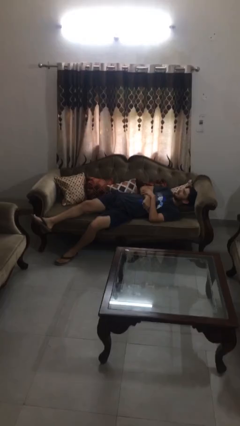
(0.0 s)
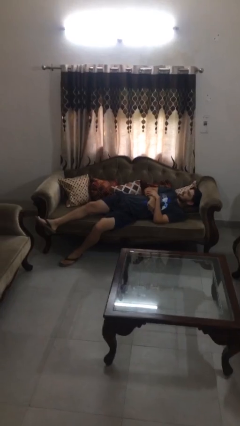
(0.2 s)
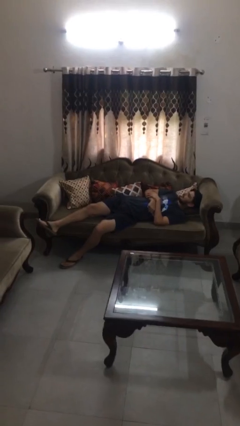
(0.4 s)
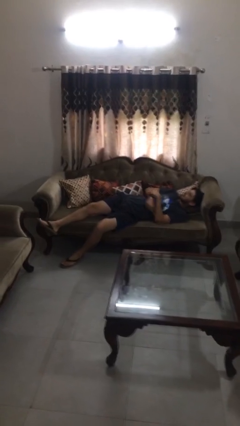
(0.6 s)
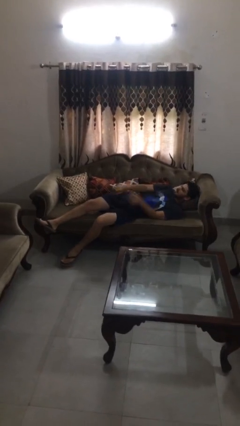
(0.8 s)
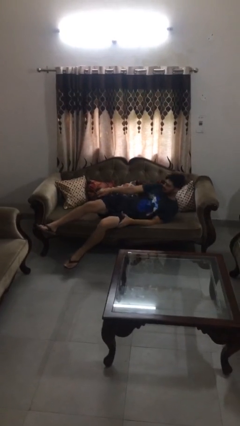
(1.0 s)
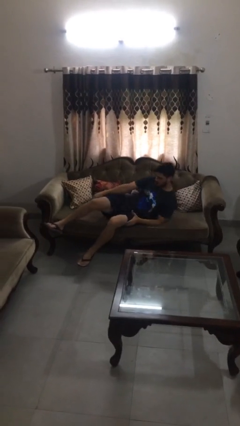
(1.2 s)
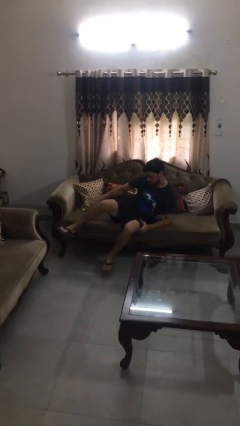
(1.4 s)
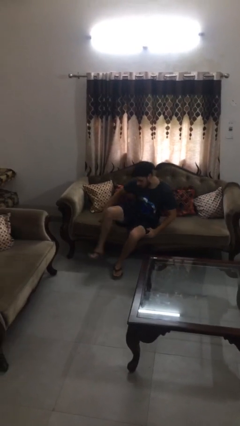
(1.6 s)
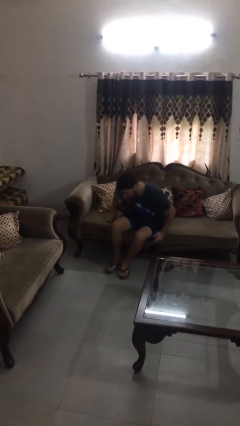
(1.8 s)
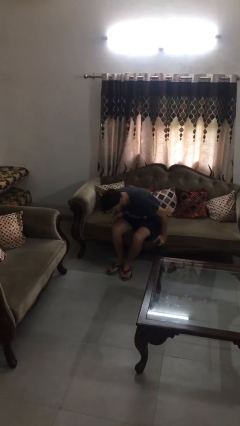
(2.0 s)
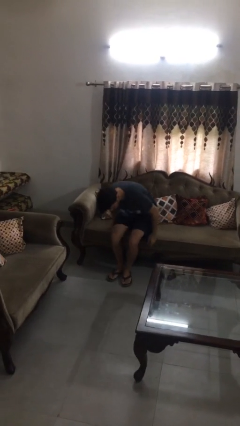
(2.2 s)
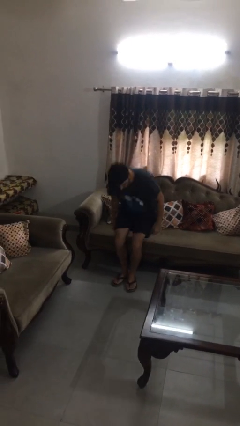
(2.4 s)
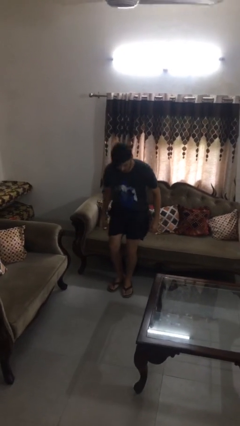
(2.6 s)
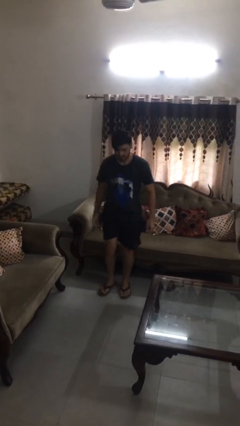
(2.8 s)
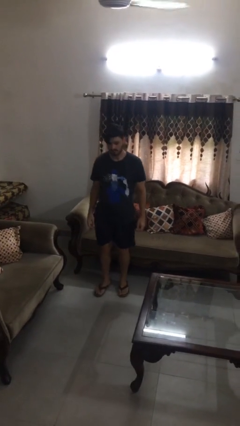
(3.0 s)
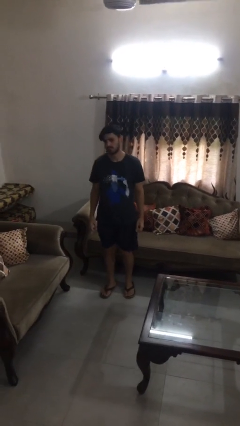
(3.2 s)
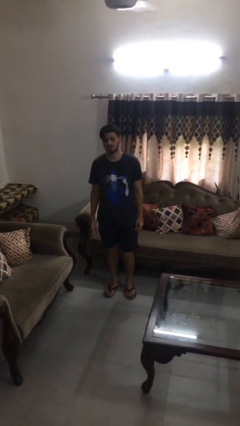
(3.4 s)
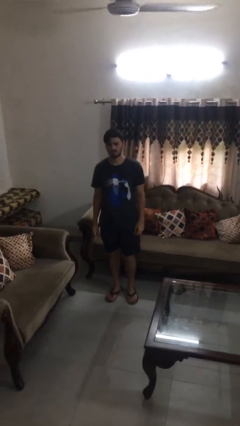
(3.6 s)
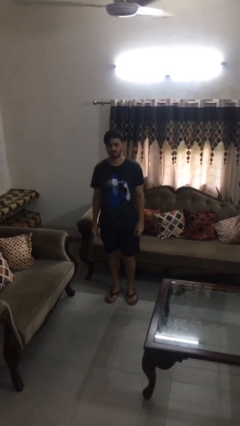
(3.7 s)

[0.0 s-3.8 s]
person stands up

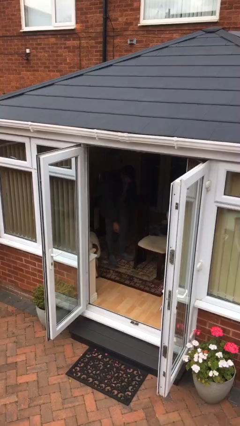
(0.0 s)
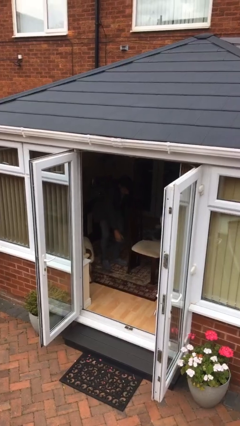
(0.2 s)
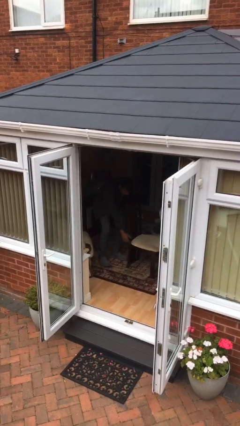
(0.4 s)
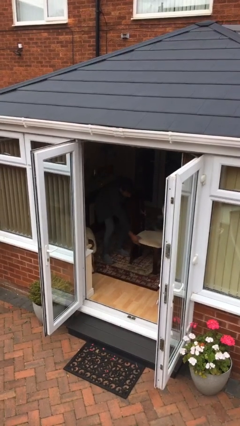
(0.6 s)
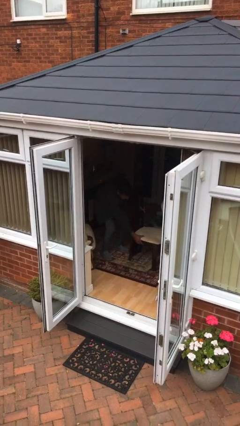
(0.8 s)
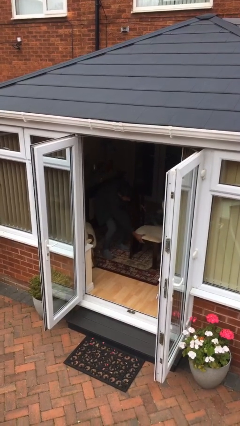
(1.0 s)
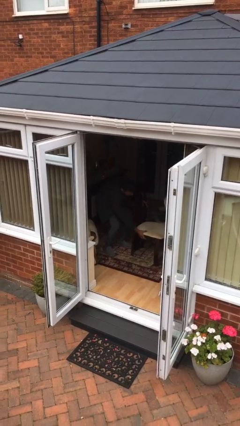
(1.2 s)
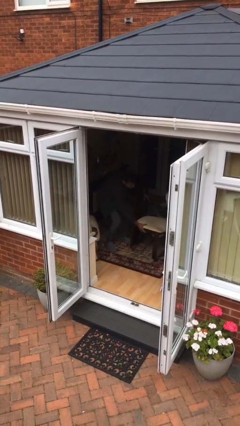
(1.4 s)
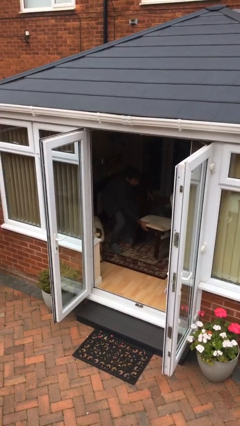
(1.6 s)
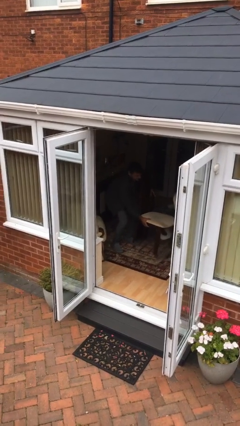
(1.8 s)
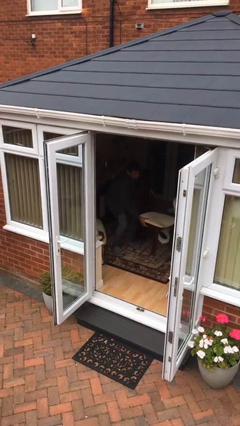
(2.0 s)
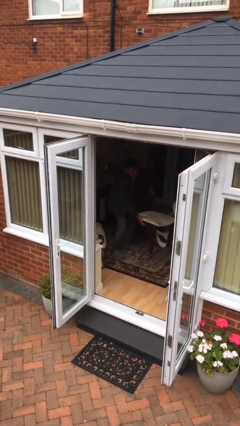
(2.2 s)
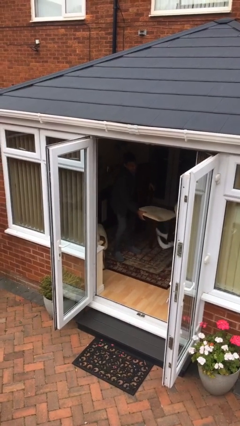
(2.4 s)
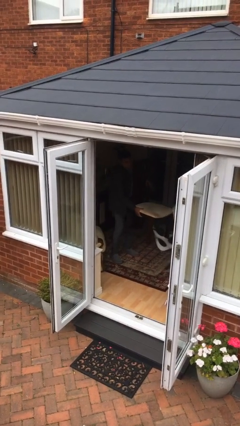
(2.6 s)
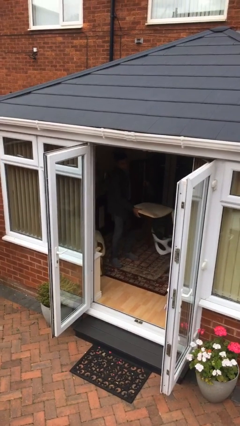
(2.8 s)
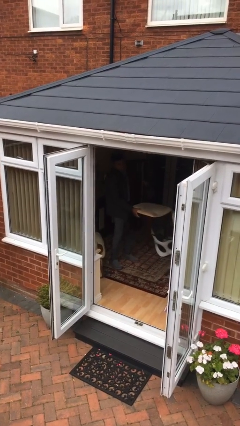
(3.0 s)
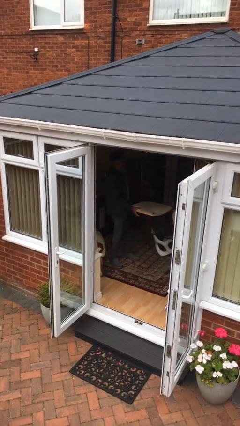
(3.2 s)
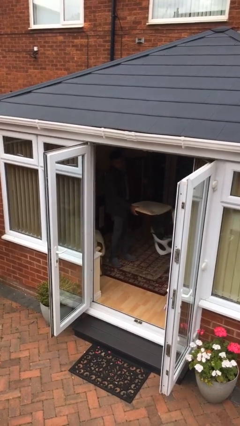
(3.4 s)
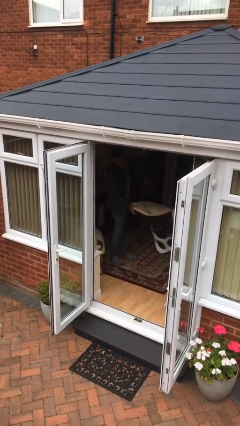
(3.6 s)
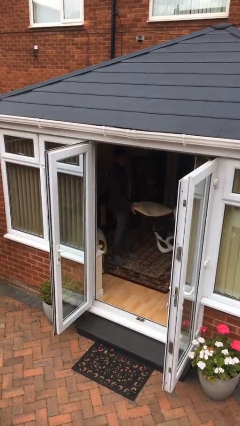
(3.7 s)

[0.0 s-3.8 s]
person picks up object from floor

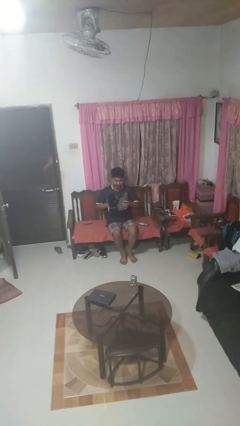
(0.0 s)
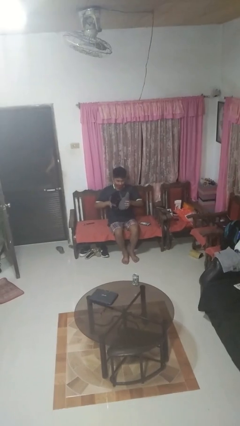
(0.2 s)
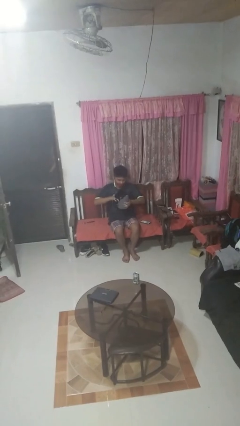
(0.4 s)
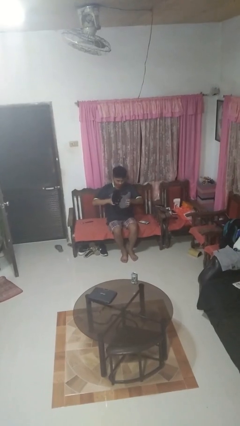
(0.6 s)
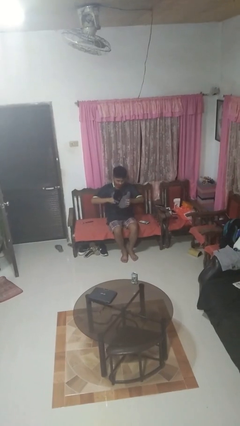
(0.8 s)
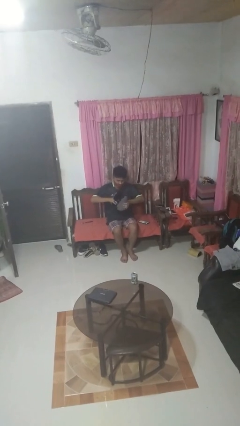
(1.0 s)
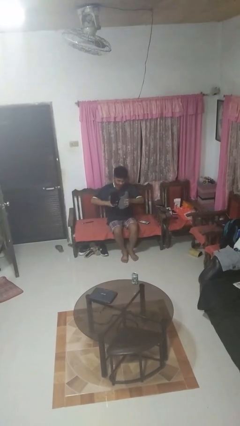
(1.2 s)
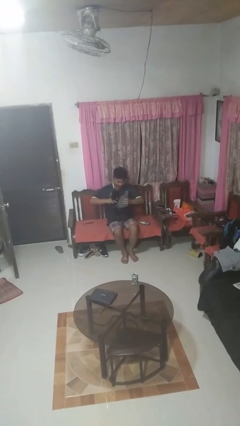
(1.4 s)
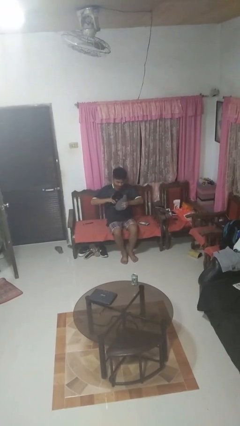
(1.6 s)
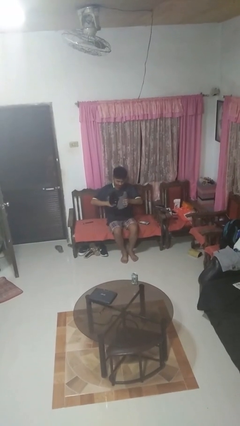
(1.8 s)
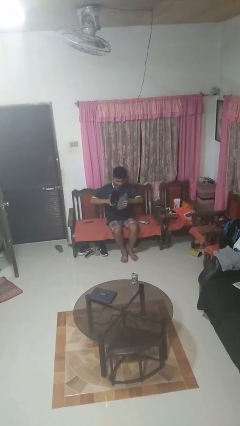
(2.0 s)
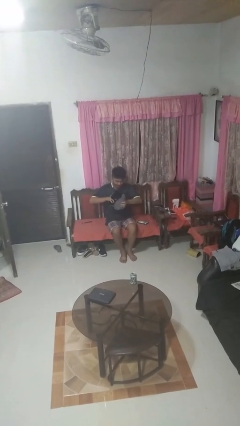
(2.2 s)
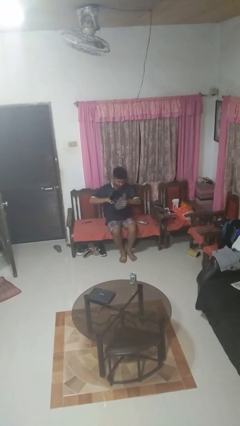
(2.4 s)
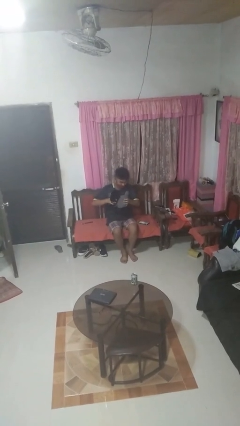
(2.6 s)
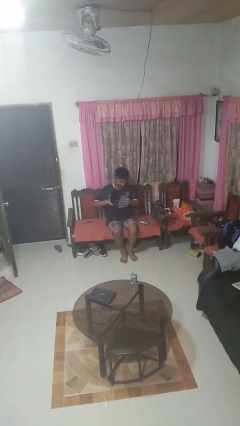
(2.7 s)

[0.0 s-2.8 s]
person squeezes object

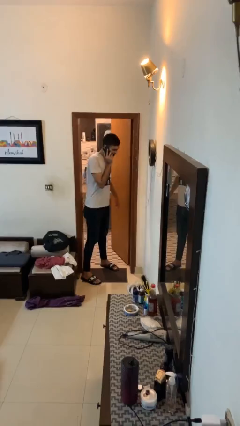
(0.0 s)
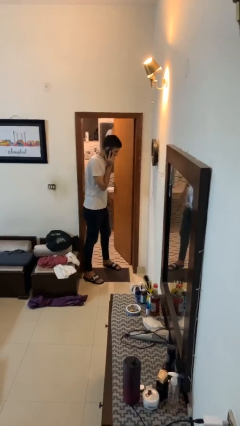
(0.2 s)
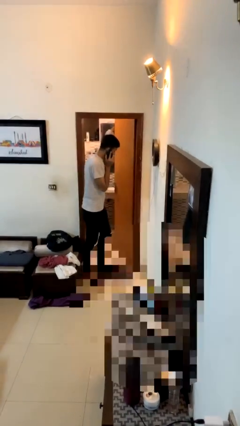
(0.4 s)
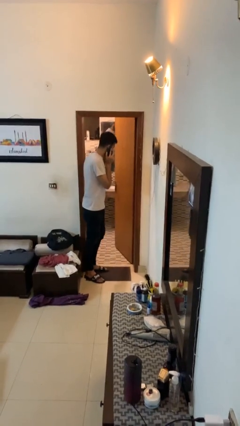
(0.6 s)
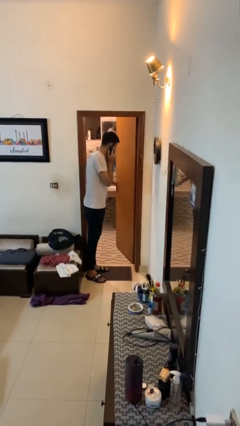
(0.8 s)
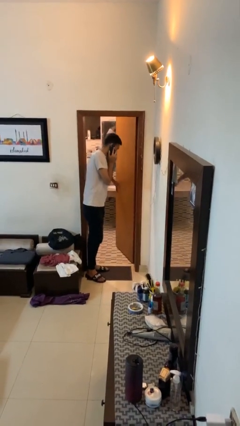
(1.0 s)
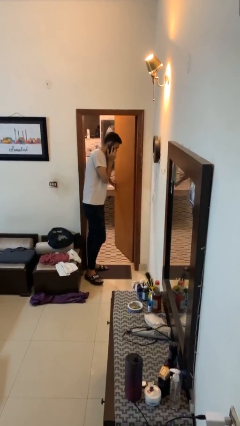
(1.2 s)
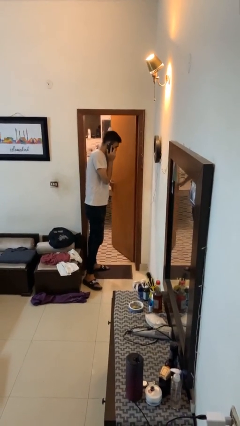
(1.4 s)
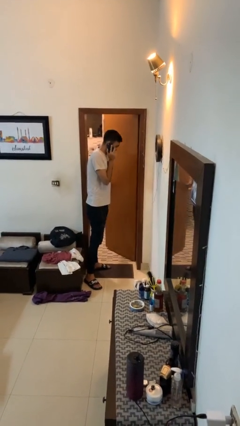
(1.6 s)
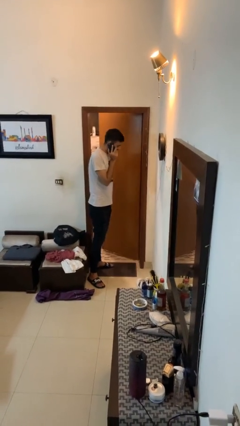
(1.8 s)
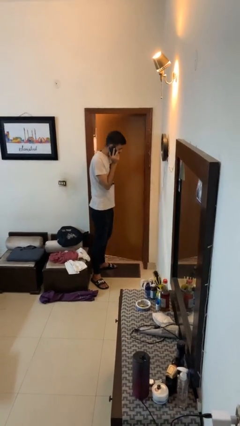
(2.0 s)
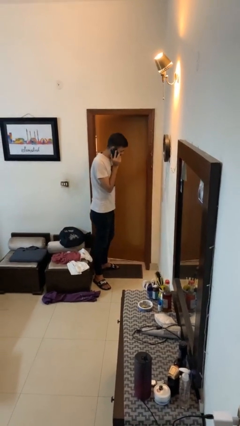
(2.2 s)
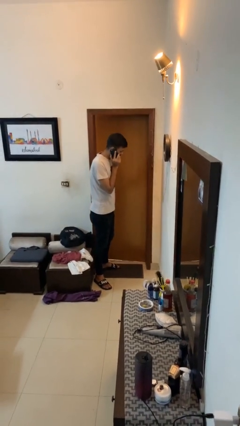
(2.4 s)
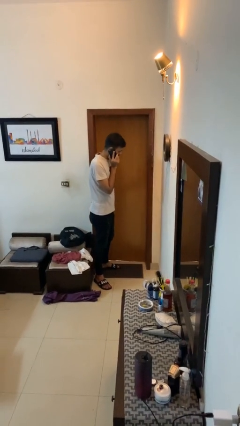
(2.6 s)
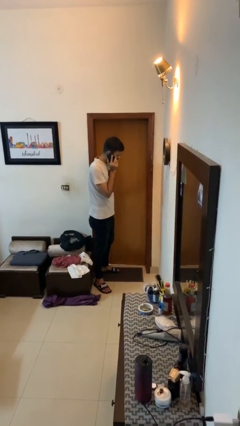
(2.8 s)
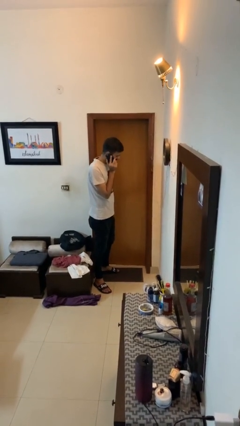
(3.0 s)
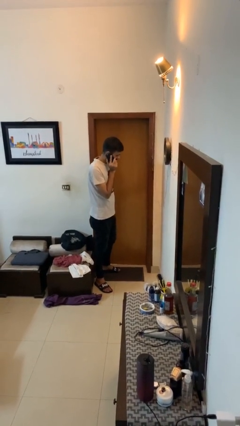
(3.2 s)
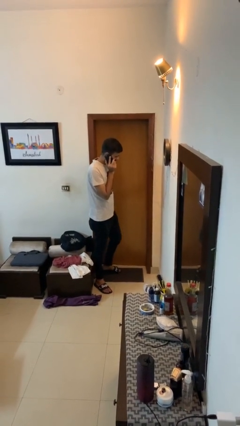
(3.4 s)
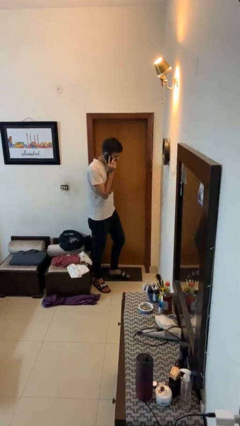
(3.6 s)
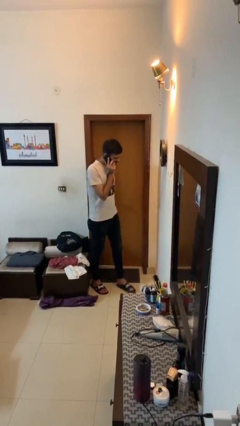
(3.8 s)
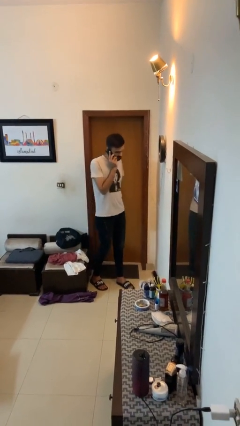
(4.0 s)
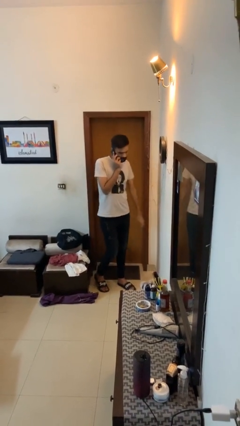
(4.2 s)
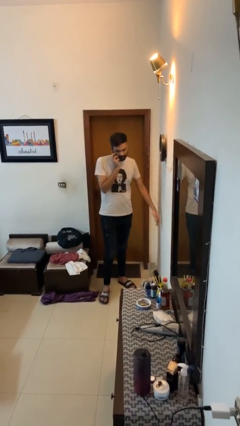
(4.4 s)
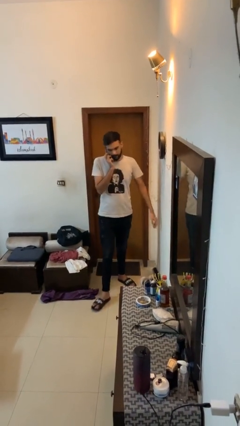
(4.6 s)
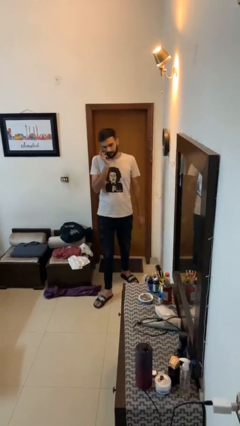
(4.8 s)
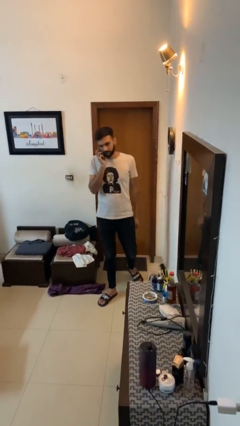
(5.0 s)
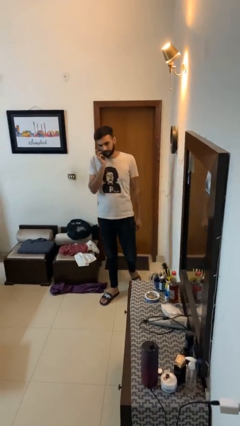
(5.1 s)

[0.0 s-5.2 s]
person closes facility door

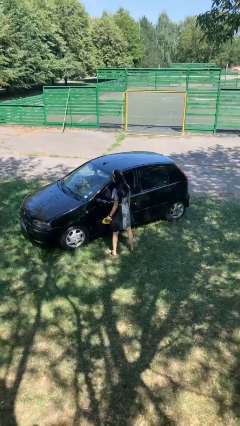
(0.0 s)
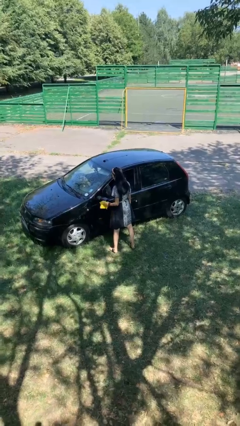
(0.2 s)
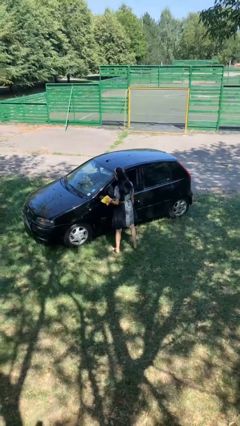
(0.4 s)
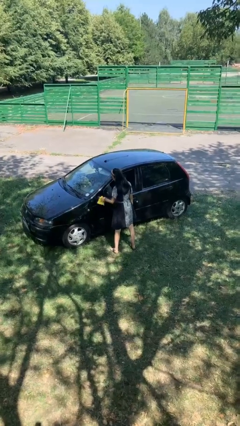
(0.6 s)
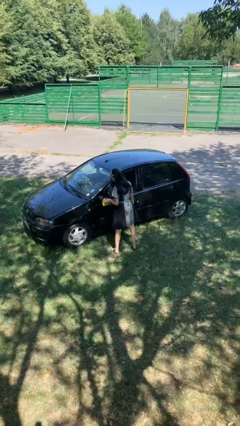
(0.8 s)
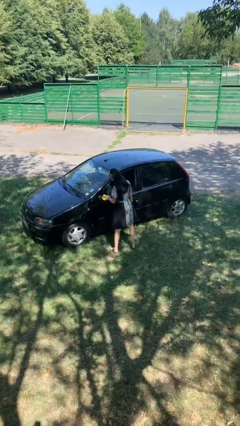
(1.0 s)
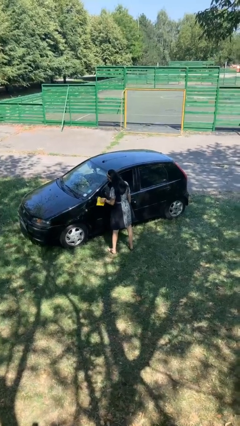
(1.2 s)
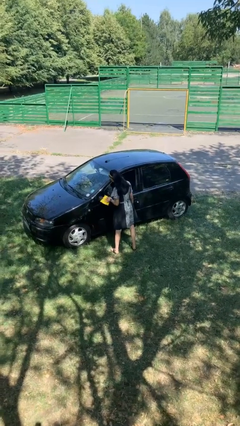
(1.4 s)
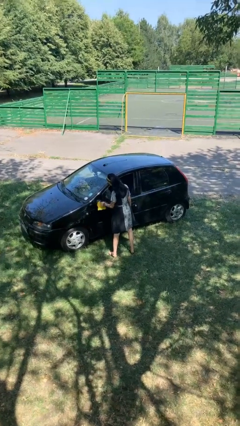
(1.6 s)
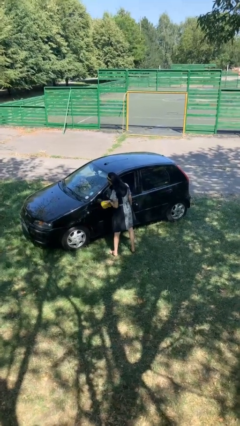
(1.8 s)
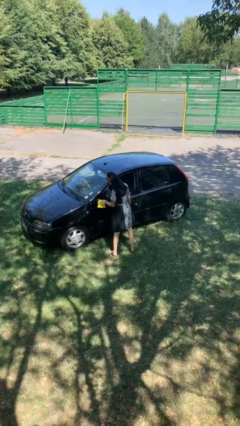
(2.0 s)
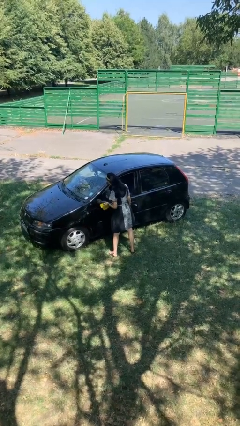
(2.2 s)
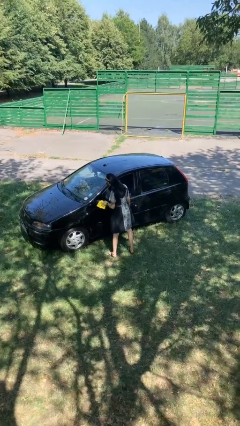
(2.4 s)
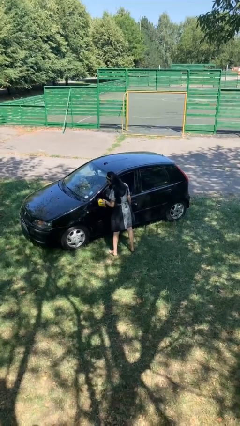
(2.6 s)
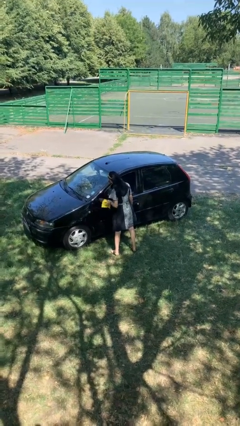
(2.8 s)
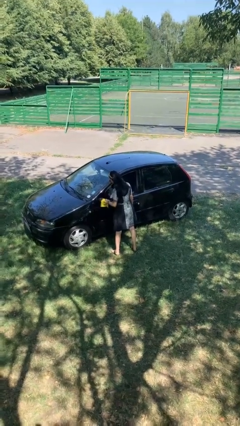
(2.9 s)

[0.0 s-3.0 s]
person polishes car with rag
